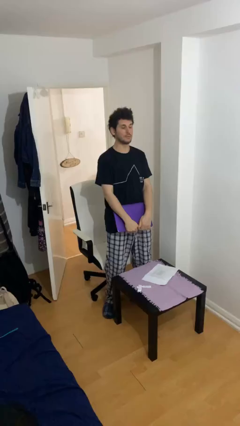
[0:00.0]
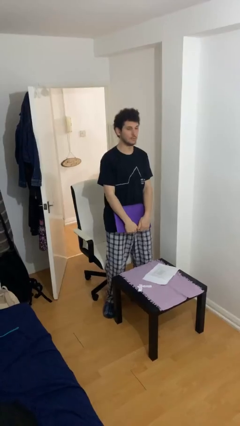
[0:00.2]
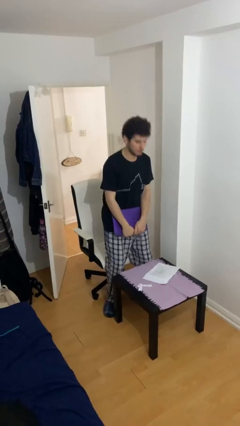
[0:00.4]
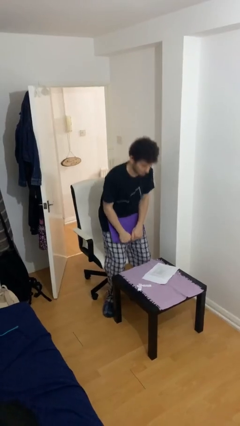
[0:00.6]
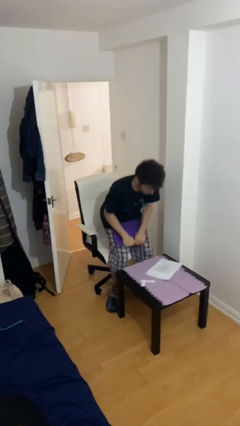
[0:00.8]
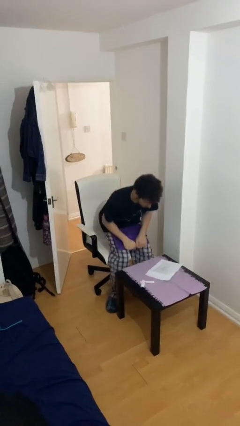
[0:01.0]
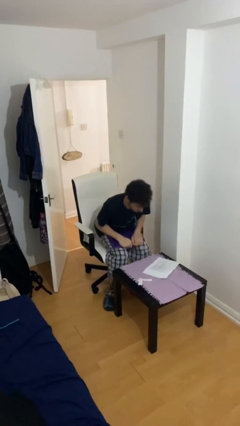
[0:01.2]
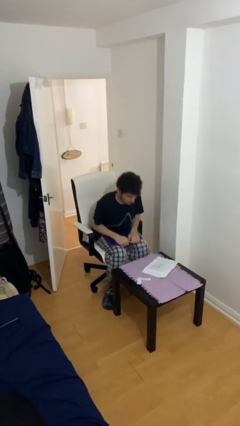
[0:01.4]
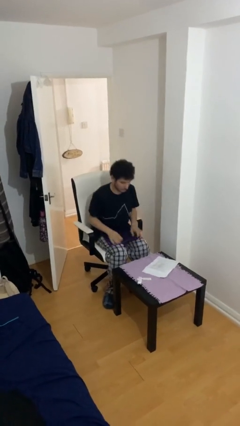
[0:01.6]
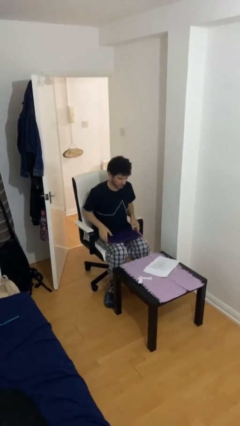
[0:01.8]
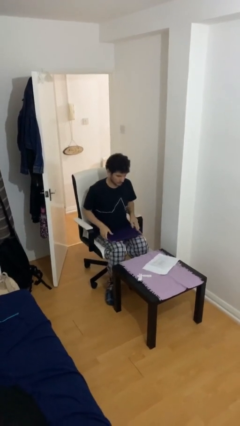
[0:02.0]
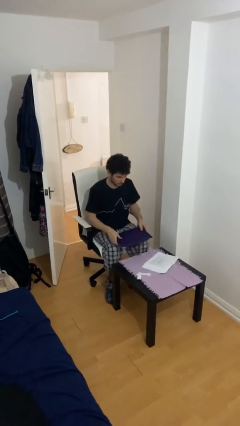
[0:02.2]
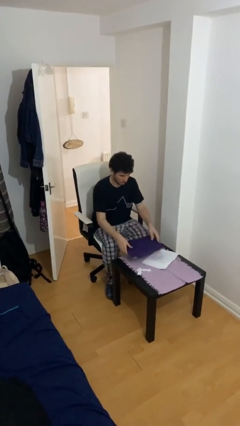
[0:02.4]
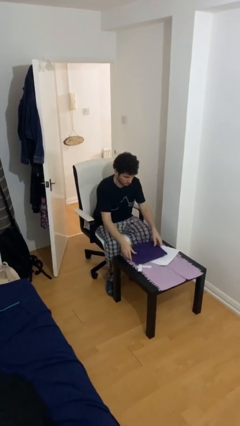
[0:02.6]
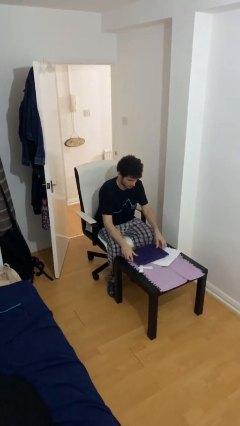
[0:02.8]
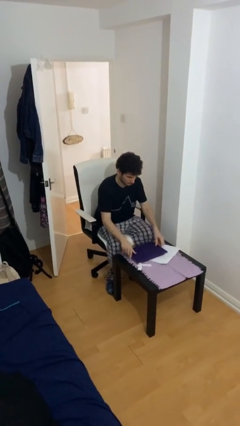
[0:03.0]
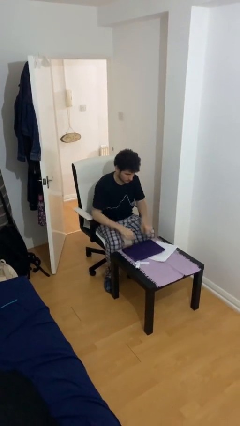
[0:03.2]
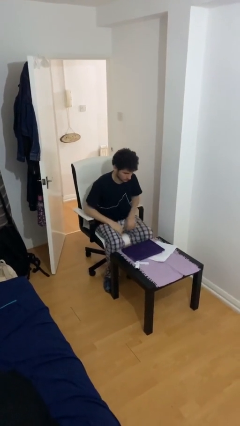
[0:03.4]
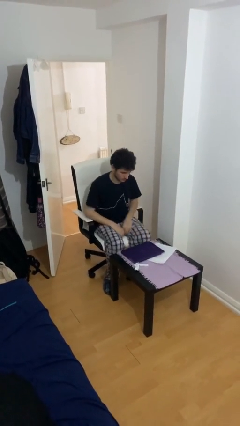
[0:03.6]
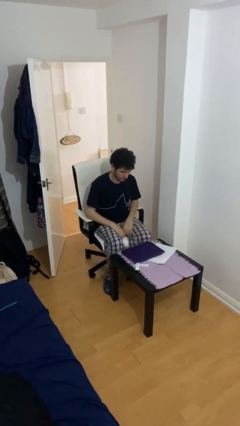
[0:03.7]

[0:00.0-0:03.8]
person sits down

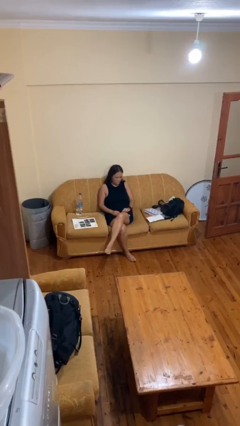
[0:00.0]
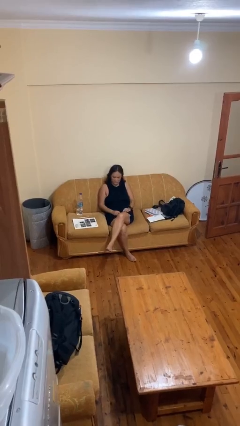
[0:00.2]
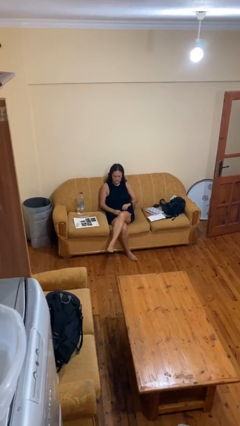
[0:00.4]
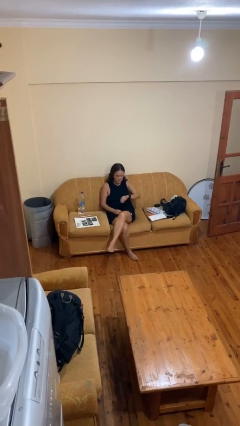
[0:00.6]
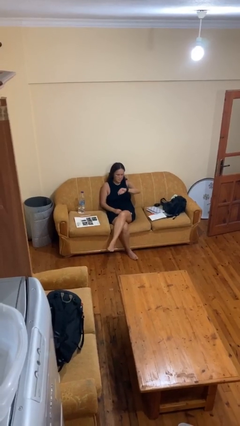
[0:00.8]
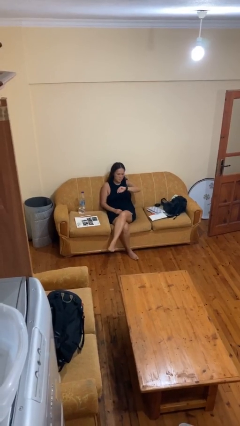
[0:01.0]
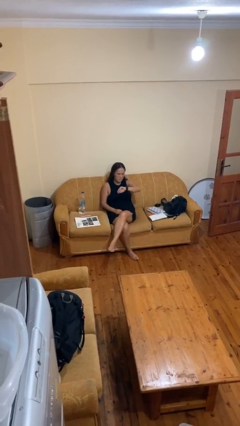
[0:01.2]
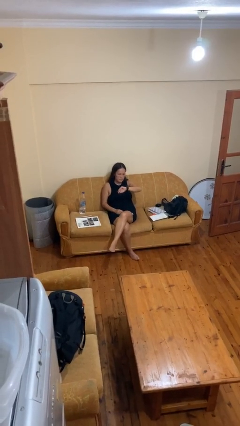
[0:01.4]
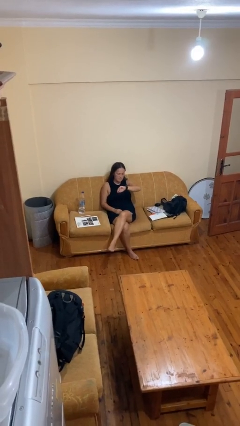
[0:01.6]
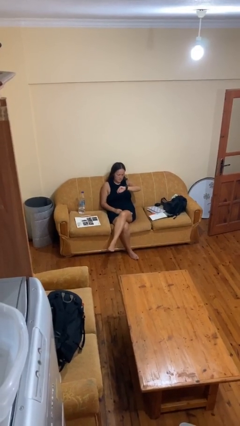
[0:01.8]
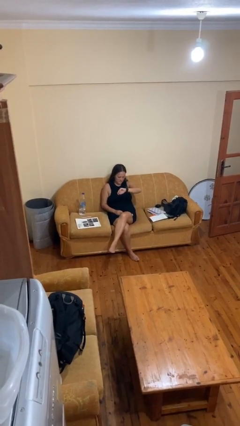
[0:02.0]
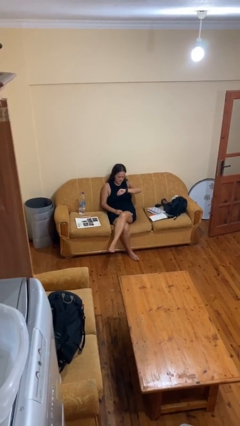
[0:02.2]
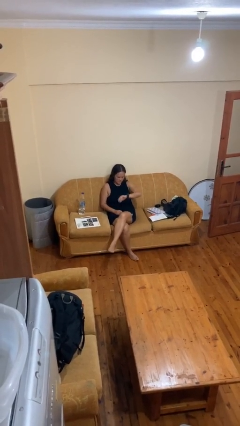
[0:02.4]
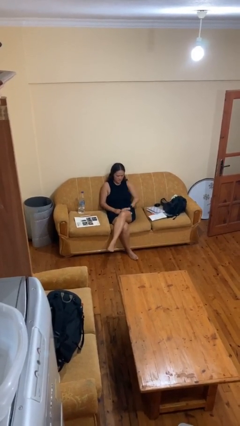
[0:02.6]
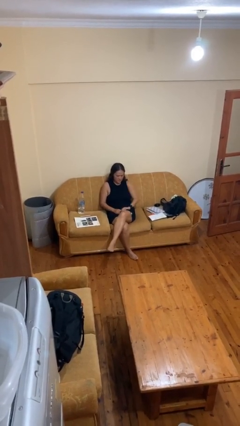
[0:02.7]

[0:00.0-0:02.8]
person looks at wristwatch

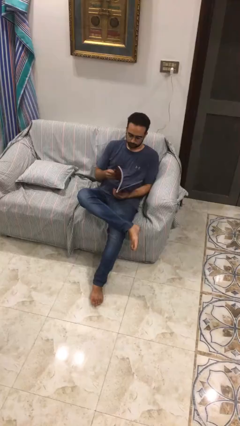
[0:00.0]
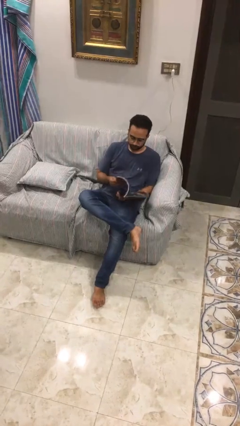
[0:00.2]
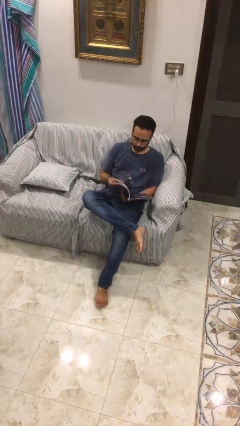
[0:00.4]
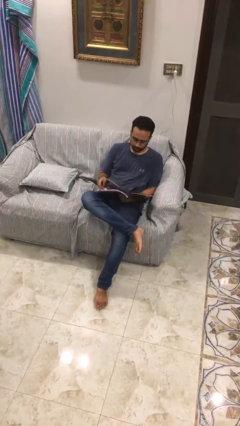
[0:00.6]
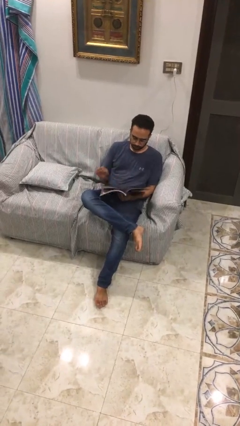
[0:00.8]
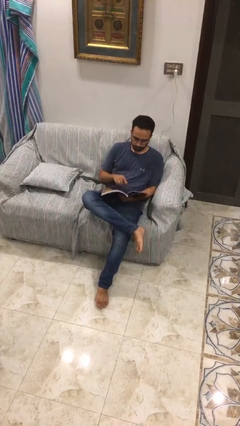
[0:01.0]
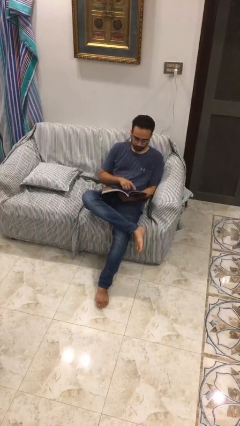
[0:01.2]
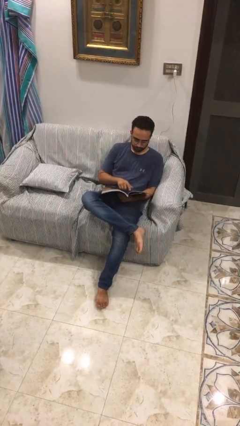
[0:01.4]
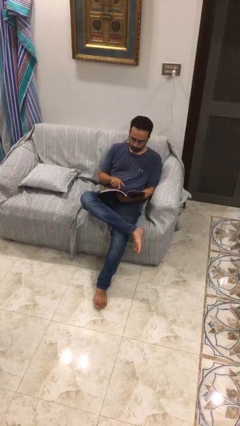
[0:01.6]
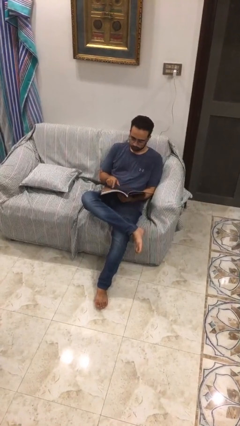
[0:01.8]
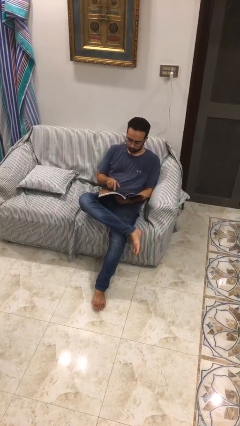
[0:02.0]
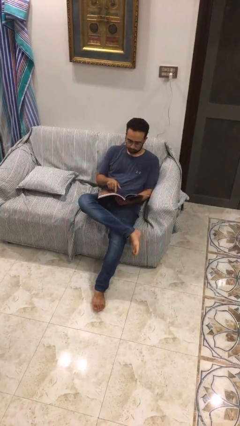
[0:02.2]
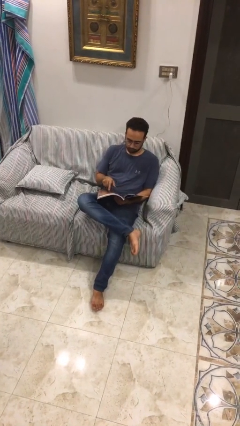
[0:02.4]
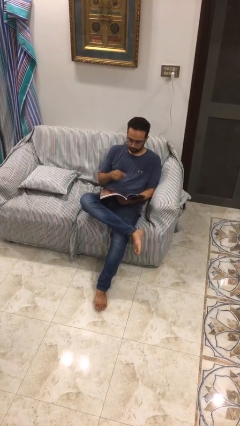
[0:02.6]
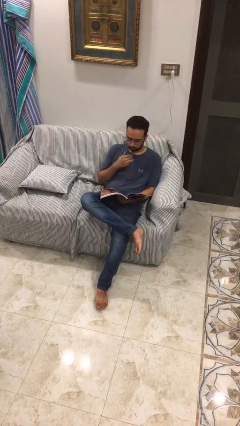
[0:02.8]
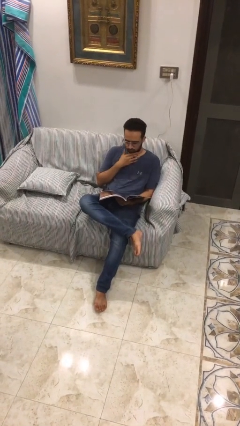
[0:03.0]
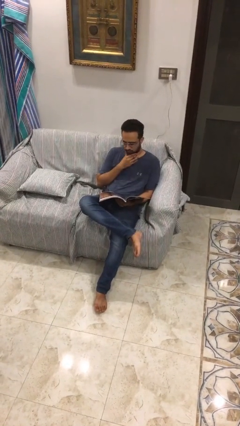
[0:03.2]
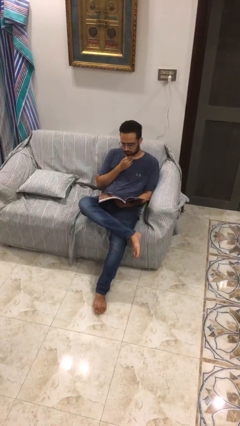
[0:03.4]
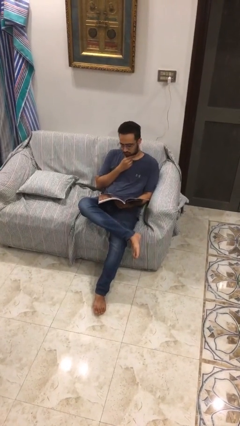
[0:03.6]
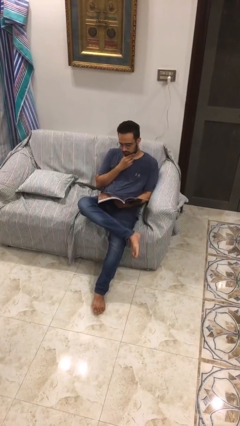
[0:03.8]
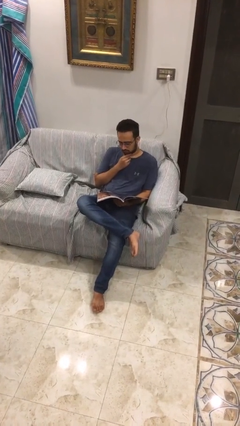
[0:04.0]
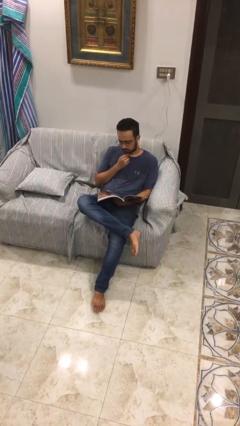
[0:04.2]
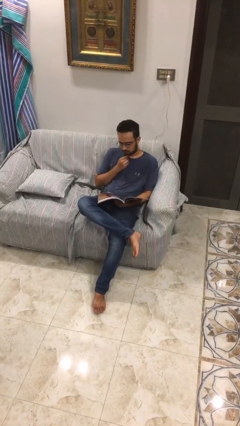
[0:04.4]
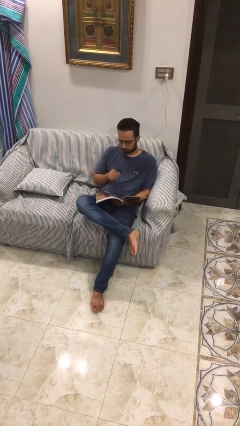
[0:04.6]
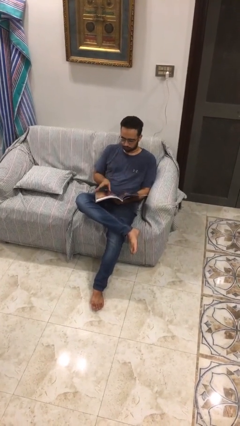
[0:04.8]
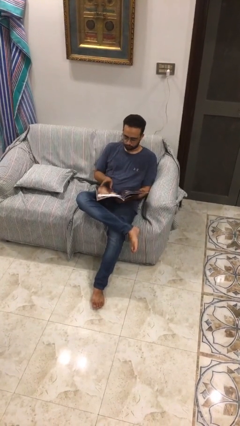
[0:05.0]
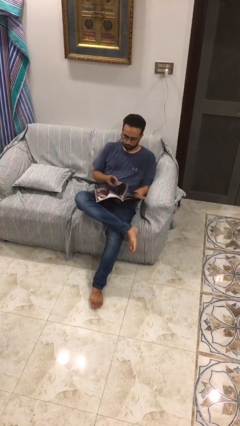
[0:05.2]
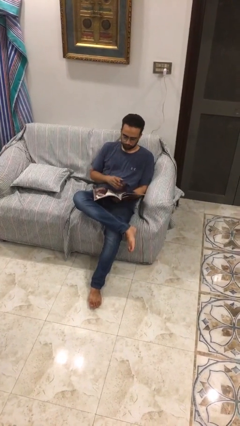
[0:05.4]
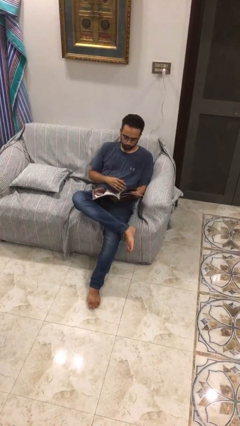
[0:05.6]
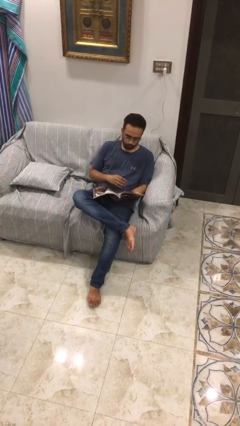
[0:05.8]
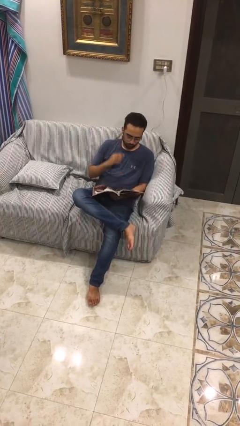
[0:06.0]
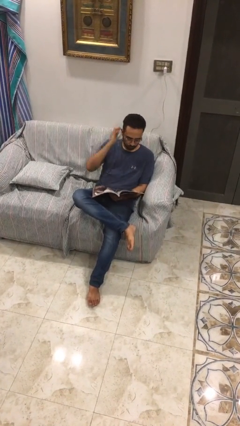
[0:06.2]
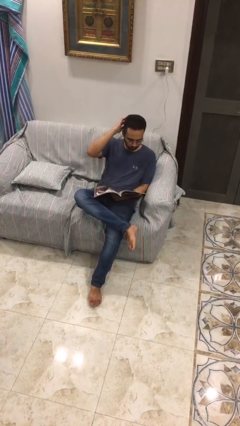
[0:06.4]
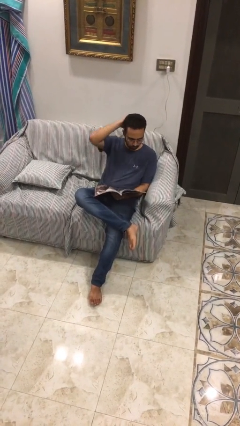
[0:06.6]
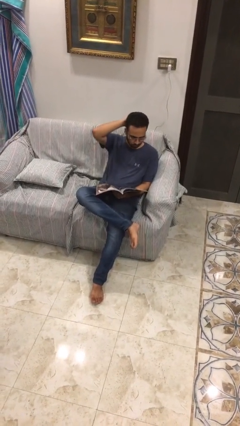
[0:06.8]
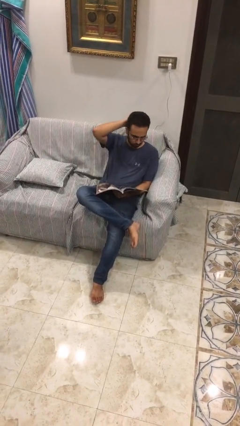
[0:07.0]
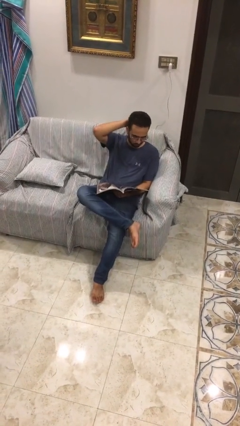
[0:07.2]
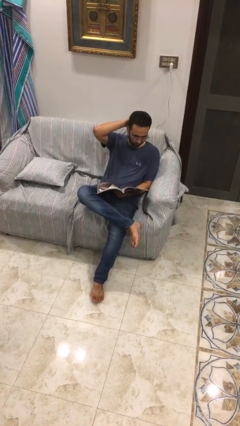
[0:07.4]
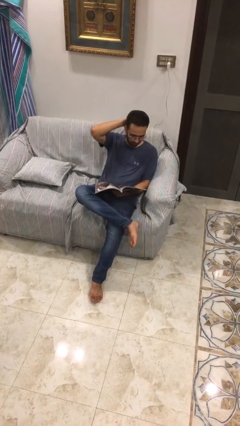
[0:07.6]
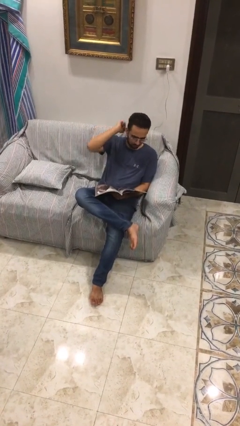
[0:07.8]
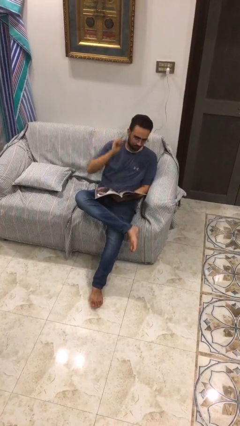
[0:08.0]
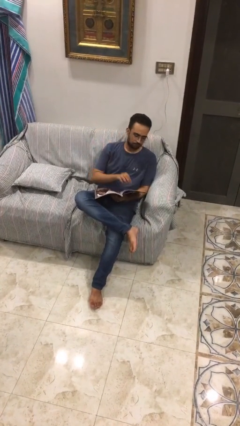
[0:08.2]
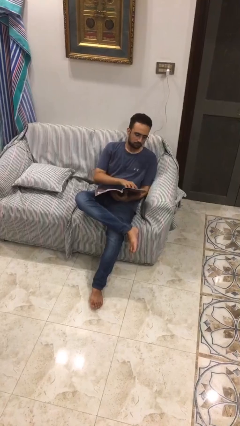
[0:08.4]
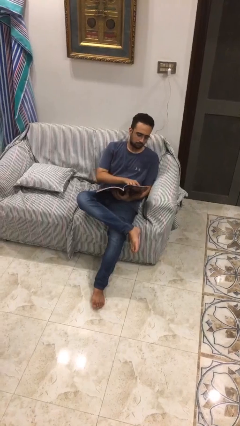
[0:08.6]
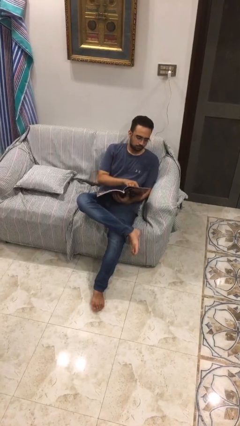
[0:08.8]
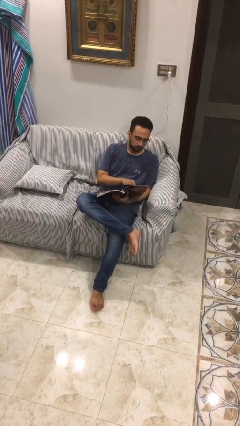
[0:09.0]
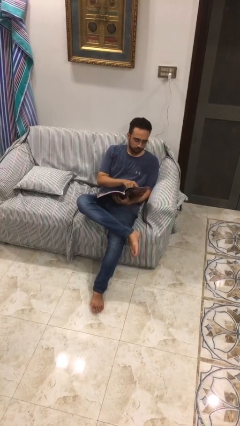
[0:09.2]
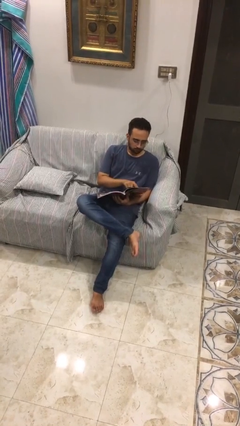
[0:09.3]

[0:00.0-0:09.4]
person reads document

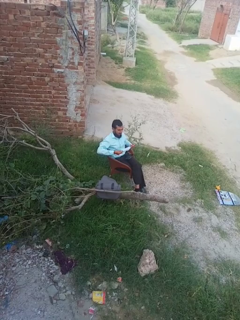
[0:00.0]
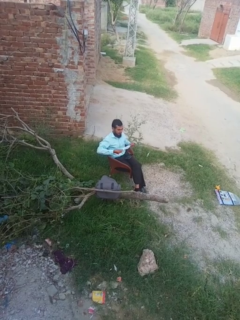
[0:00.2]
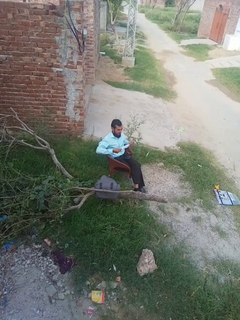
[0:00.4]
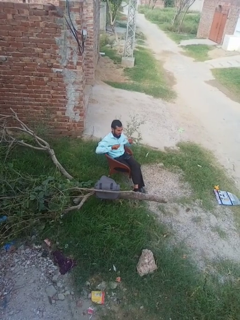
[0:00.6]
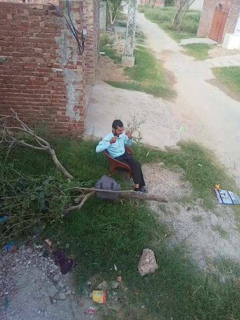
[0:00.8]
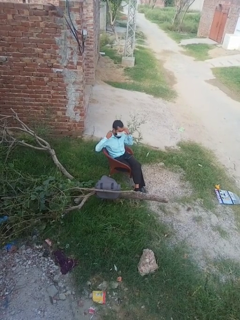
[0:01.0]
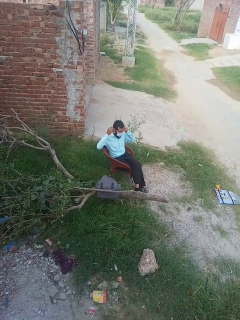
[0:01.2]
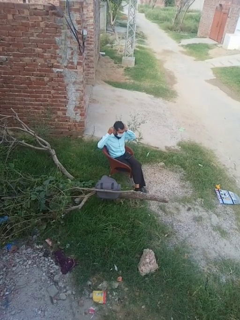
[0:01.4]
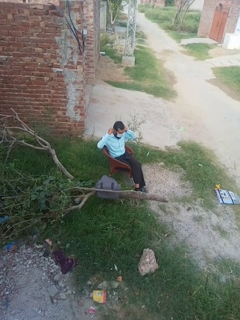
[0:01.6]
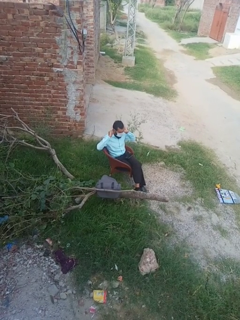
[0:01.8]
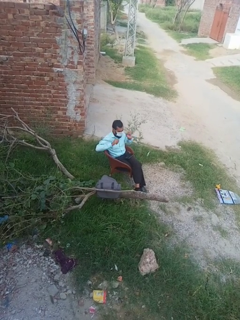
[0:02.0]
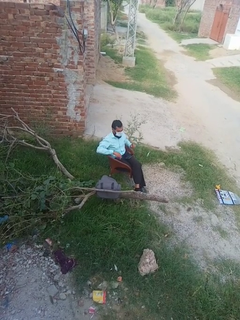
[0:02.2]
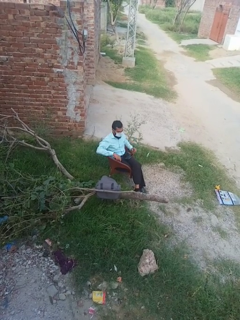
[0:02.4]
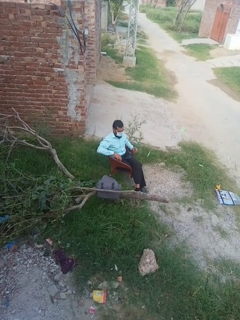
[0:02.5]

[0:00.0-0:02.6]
person puts on facemask
